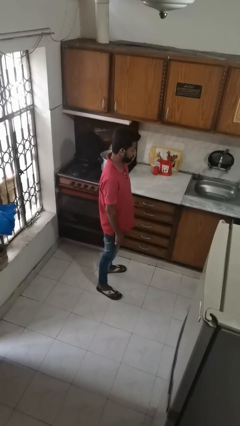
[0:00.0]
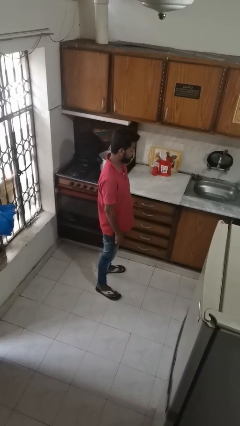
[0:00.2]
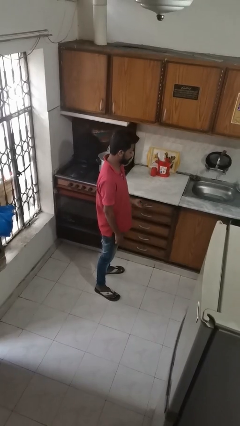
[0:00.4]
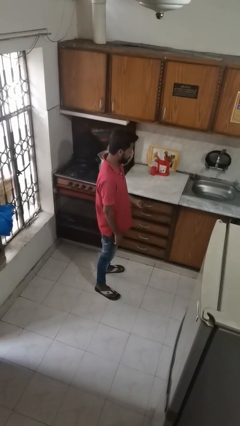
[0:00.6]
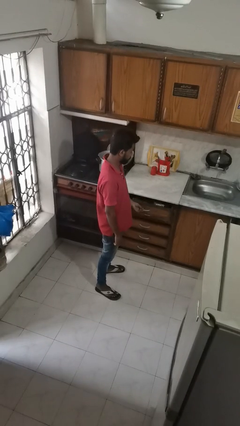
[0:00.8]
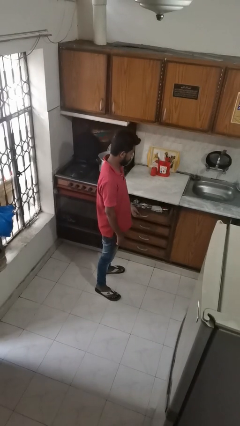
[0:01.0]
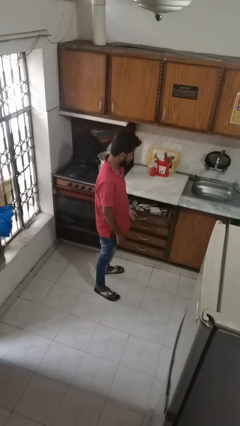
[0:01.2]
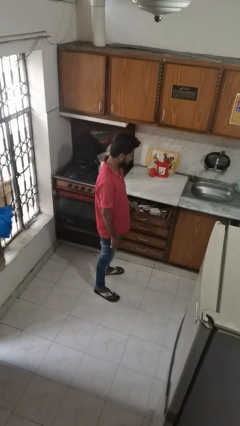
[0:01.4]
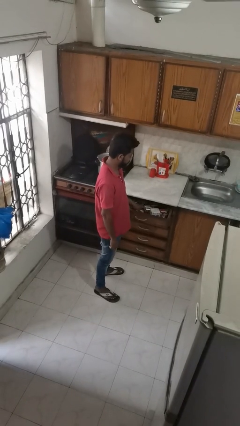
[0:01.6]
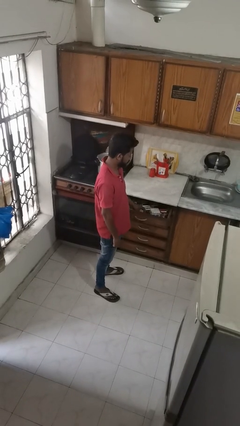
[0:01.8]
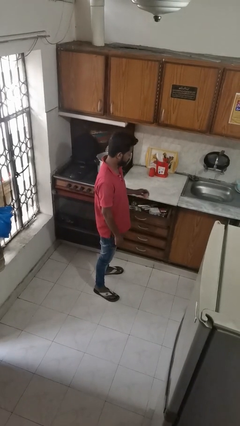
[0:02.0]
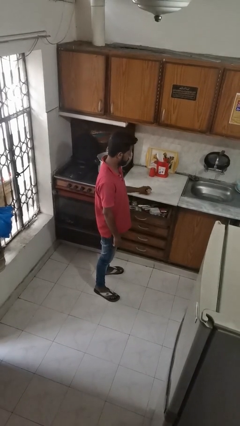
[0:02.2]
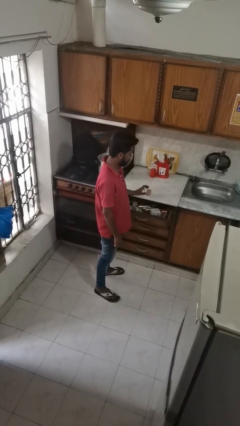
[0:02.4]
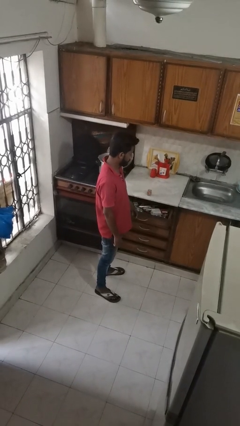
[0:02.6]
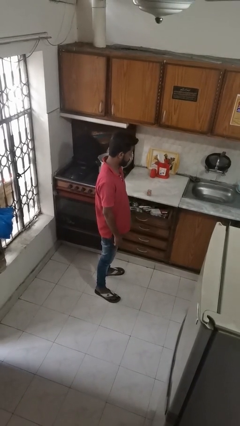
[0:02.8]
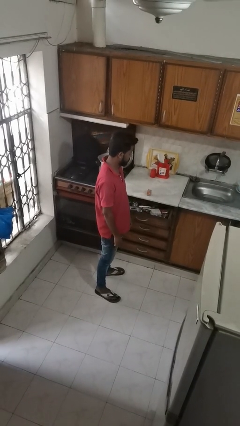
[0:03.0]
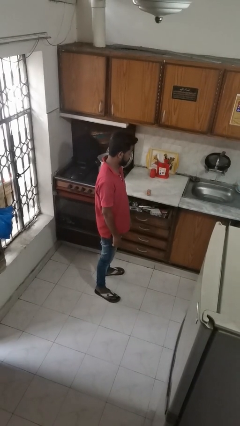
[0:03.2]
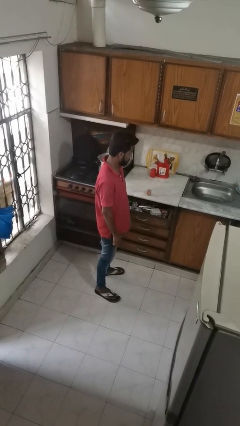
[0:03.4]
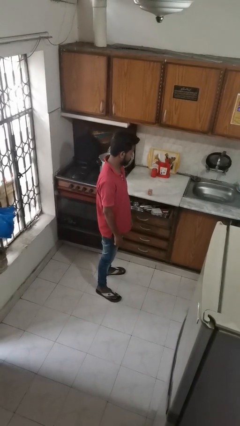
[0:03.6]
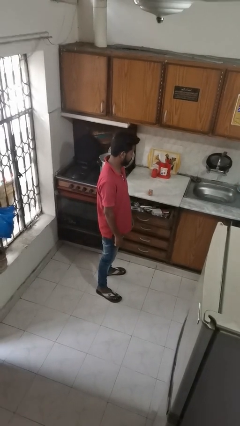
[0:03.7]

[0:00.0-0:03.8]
person takes object from kitchen drawer

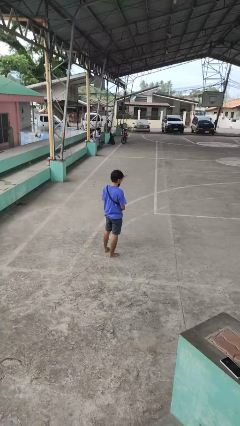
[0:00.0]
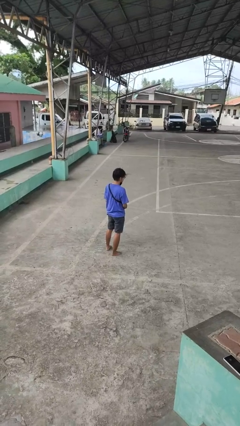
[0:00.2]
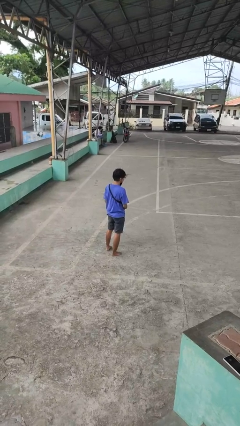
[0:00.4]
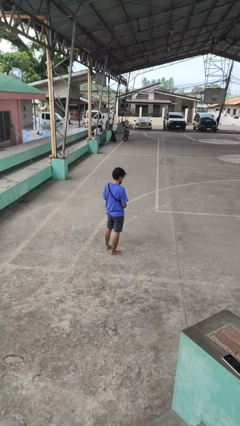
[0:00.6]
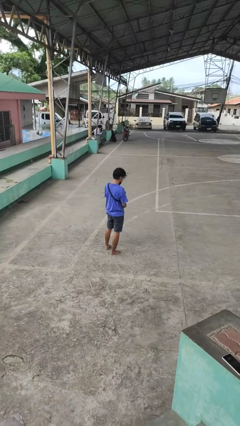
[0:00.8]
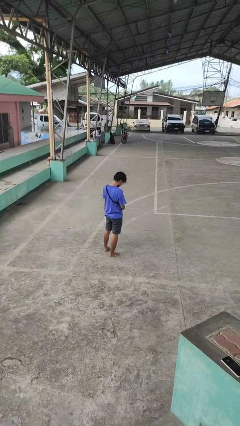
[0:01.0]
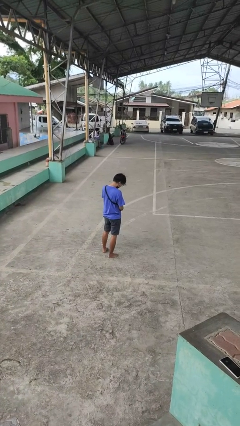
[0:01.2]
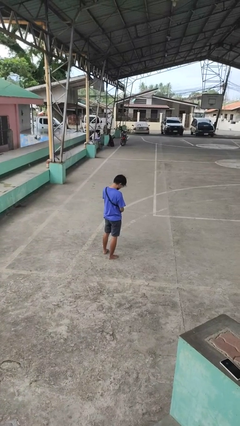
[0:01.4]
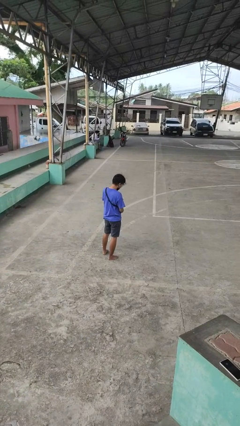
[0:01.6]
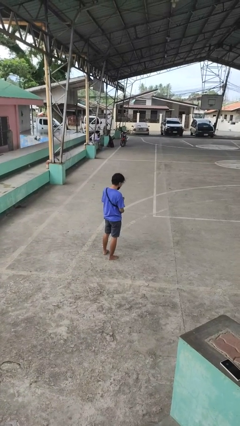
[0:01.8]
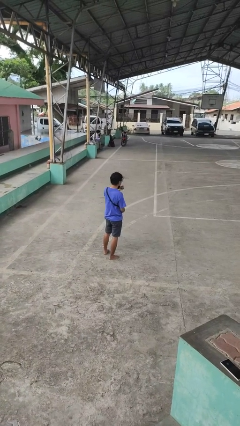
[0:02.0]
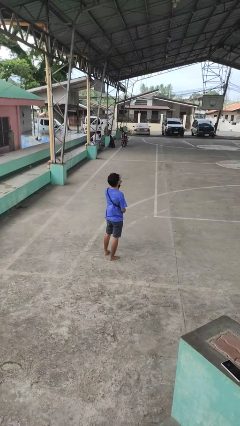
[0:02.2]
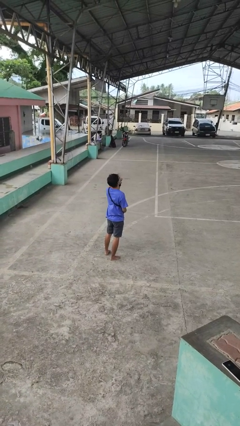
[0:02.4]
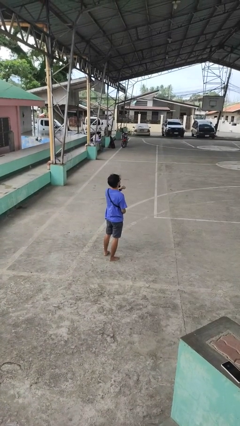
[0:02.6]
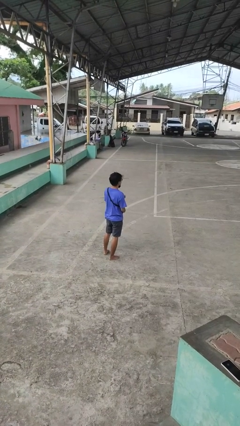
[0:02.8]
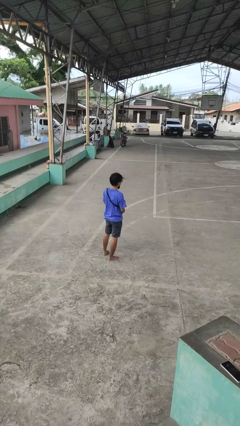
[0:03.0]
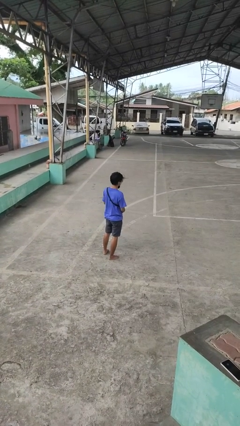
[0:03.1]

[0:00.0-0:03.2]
person eats snack from bag

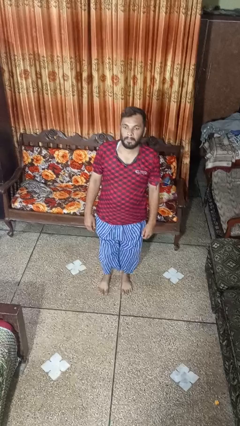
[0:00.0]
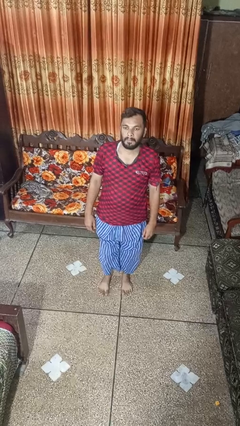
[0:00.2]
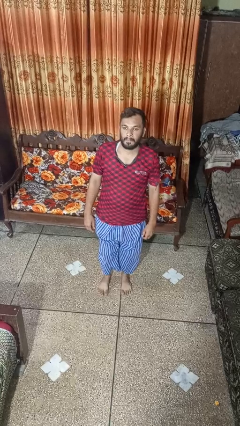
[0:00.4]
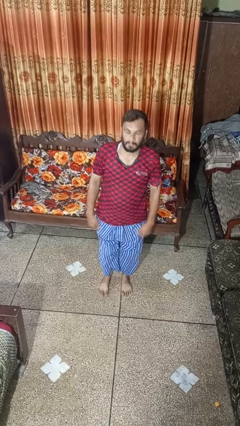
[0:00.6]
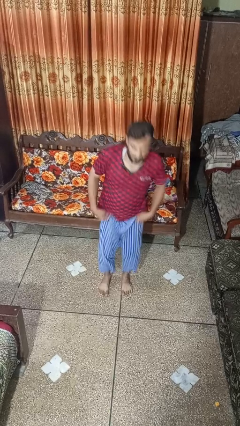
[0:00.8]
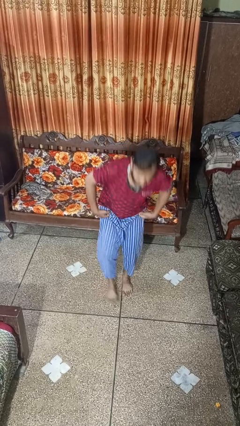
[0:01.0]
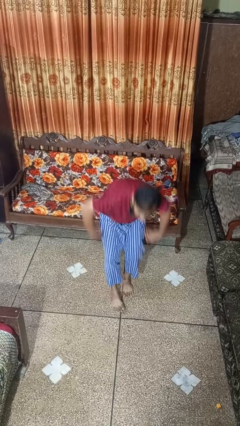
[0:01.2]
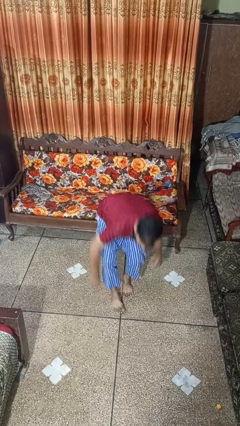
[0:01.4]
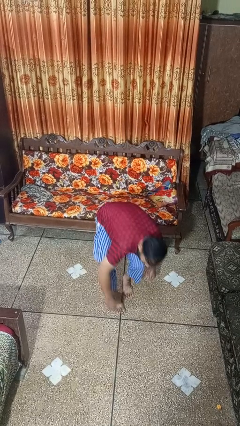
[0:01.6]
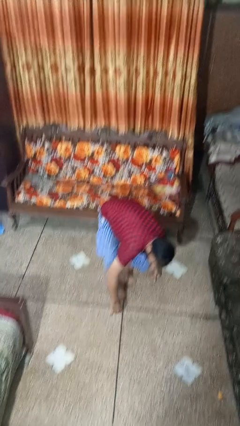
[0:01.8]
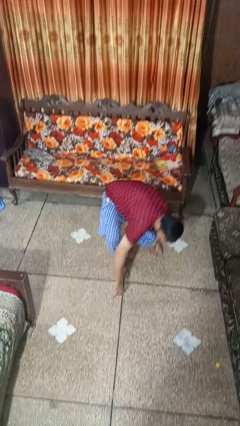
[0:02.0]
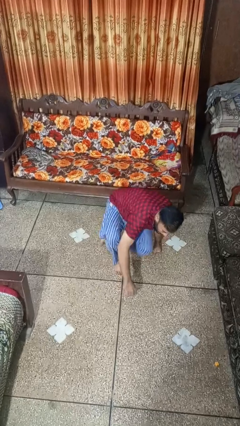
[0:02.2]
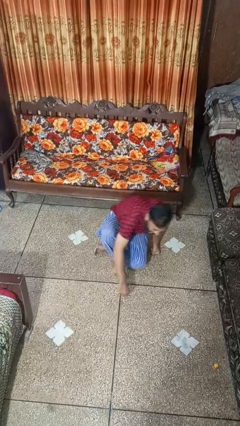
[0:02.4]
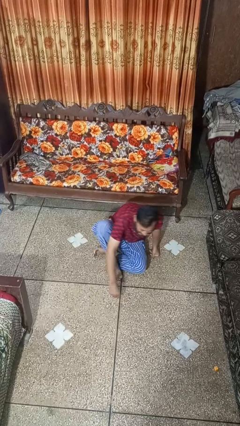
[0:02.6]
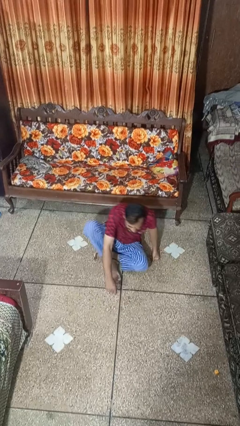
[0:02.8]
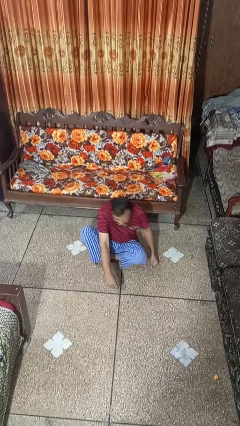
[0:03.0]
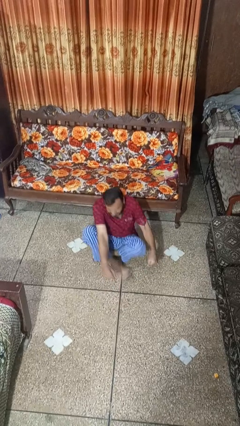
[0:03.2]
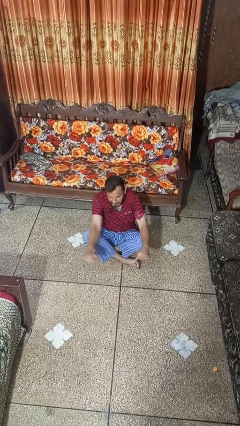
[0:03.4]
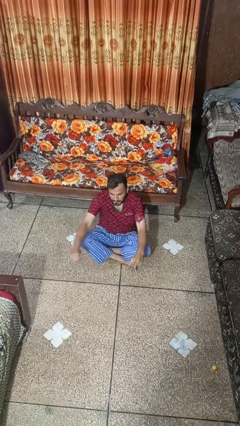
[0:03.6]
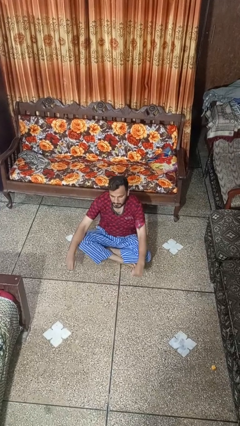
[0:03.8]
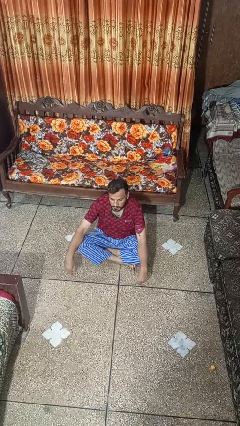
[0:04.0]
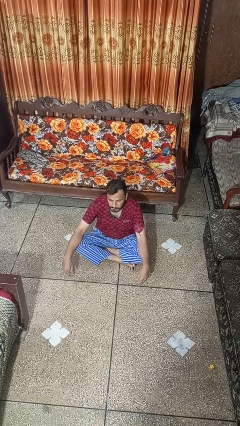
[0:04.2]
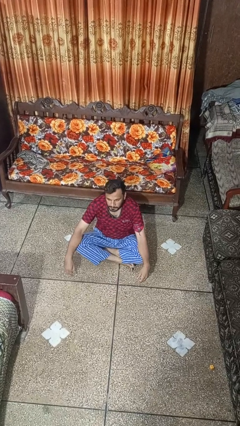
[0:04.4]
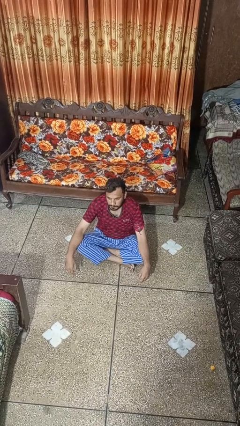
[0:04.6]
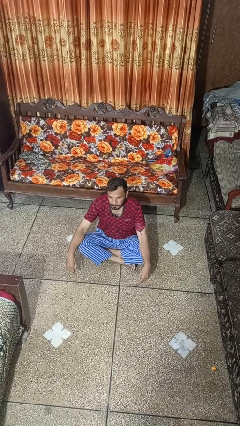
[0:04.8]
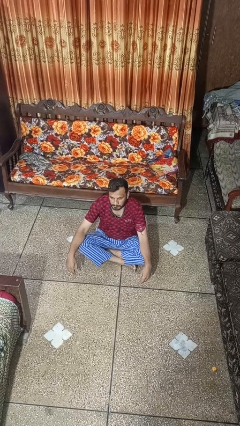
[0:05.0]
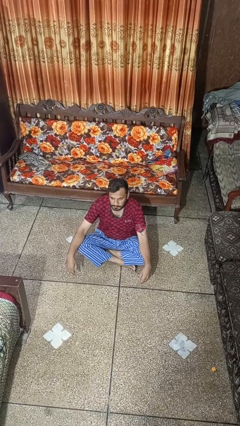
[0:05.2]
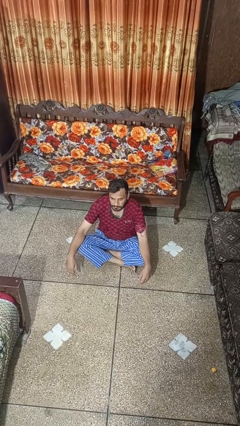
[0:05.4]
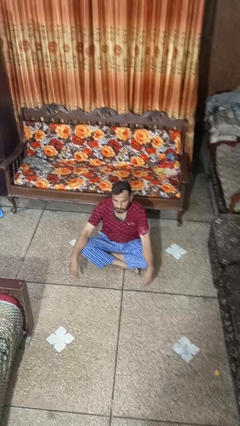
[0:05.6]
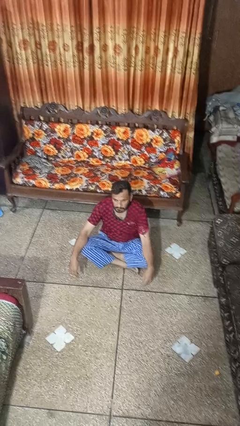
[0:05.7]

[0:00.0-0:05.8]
person sits crisscross

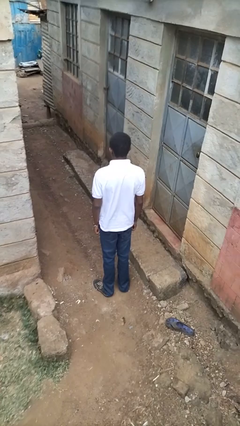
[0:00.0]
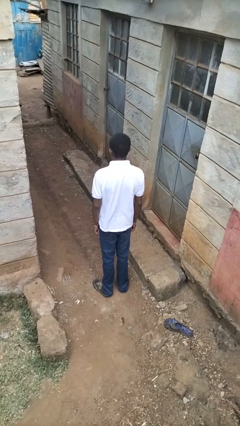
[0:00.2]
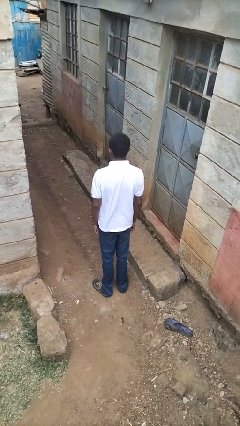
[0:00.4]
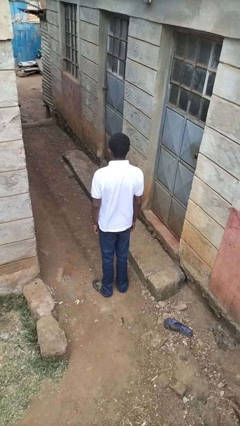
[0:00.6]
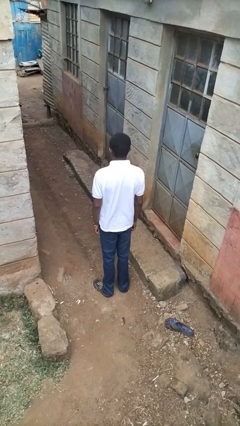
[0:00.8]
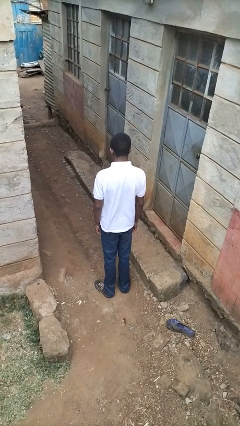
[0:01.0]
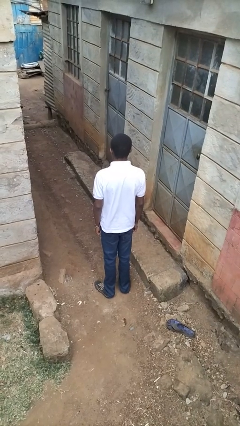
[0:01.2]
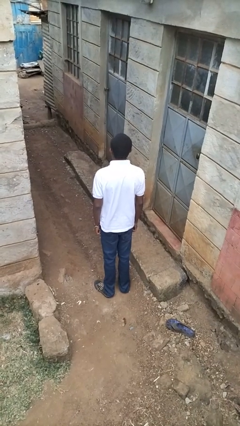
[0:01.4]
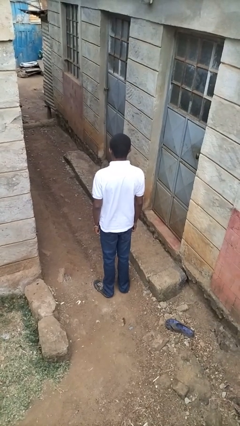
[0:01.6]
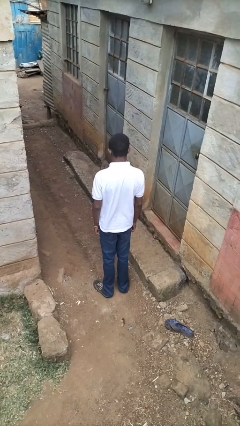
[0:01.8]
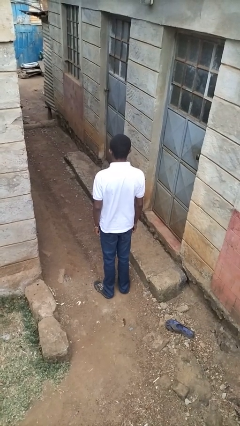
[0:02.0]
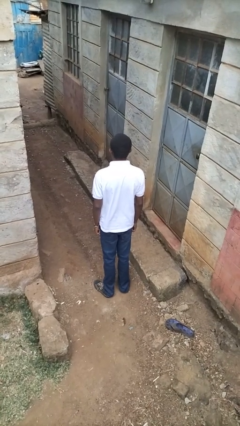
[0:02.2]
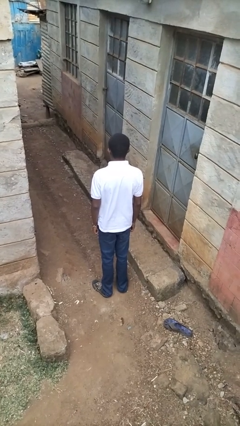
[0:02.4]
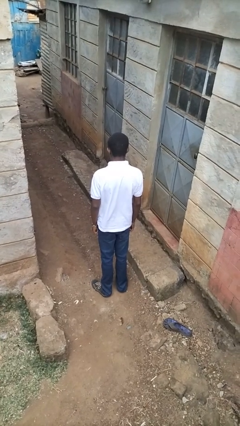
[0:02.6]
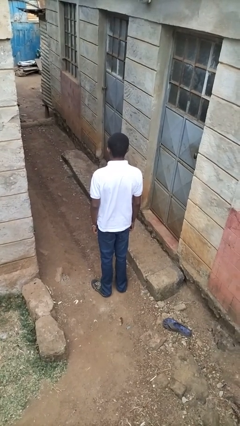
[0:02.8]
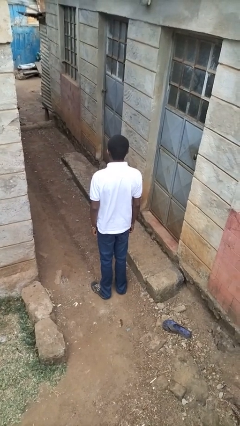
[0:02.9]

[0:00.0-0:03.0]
person nods head

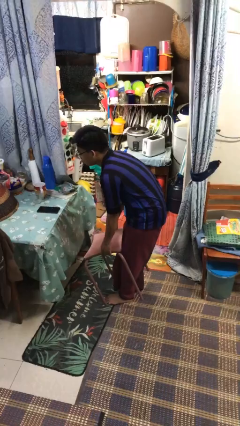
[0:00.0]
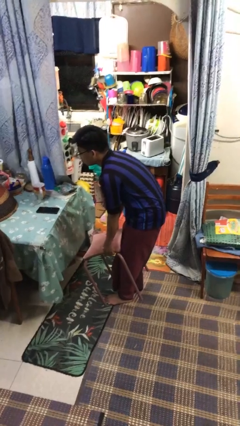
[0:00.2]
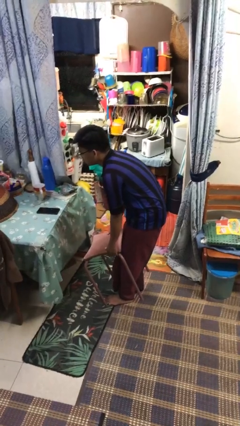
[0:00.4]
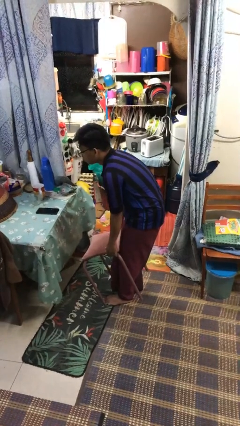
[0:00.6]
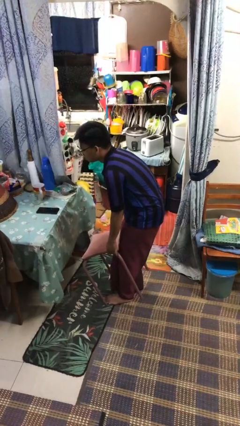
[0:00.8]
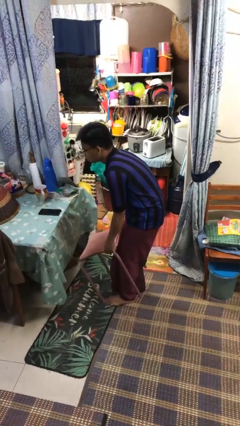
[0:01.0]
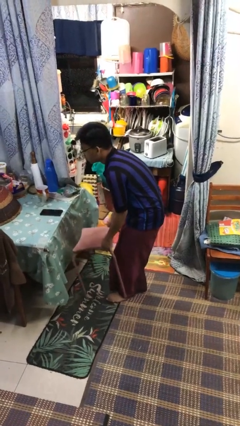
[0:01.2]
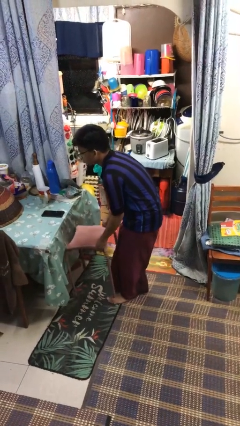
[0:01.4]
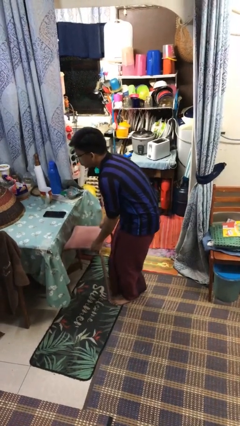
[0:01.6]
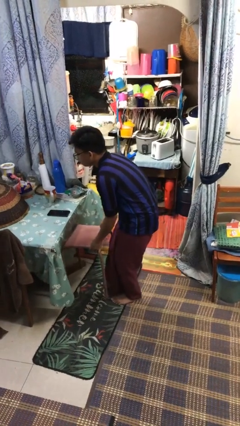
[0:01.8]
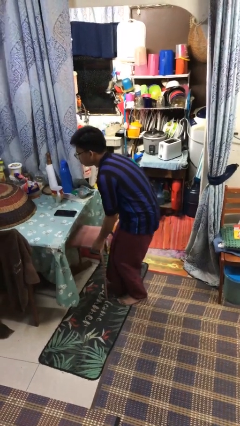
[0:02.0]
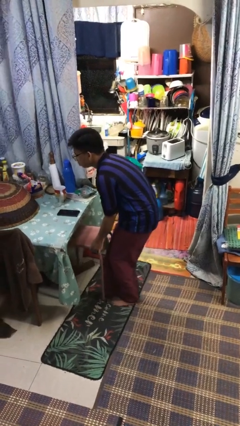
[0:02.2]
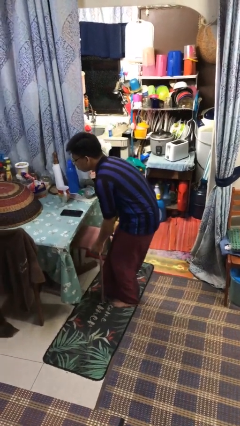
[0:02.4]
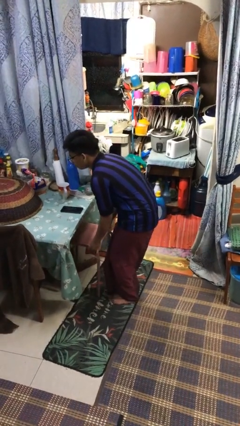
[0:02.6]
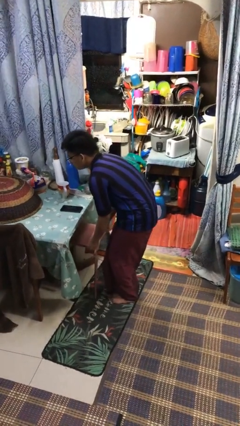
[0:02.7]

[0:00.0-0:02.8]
person pushes in chair
